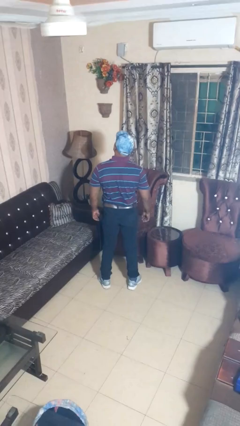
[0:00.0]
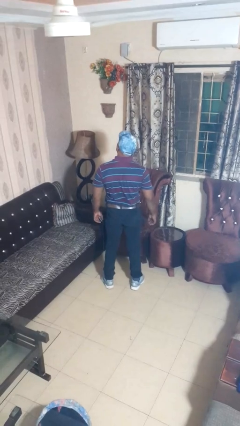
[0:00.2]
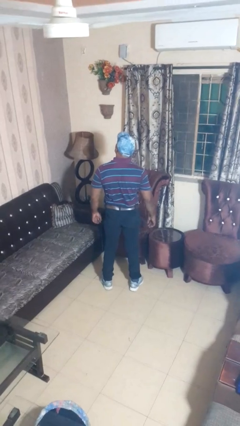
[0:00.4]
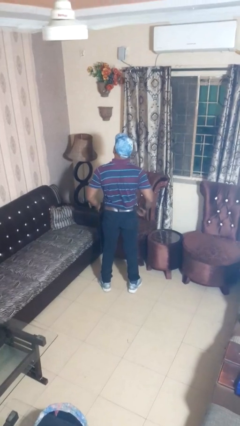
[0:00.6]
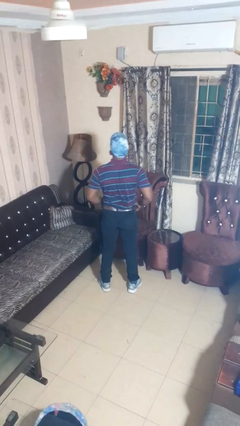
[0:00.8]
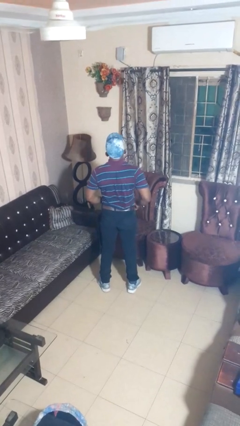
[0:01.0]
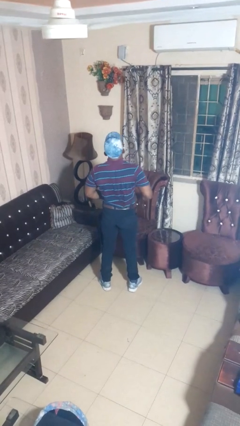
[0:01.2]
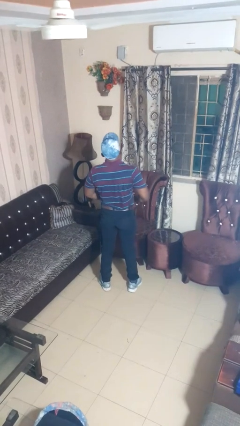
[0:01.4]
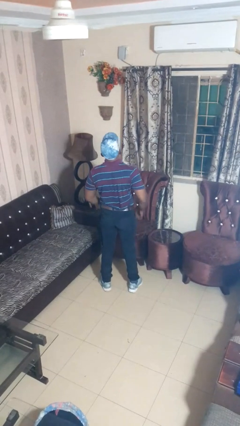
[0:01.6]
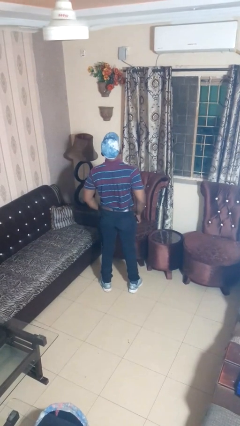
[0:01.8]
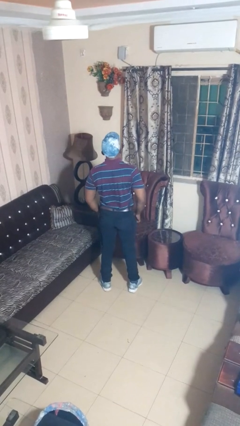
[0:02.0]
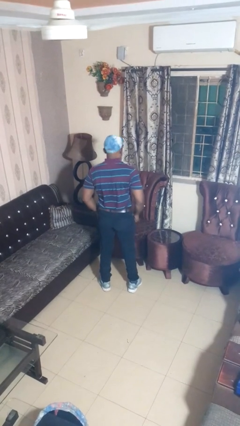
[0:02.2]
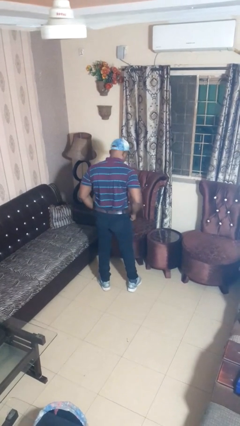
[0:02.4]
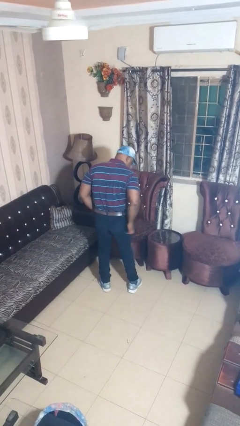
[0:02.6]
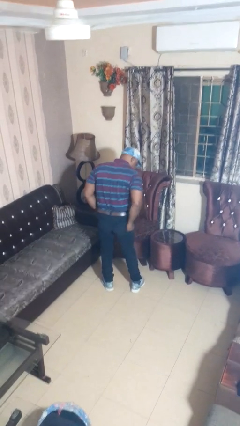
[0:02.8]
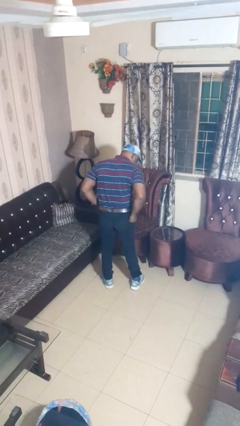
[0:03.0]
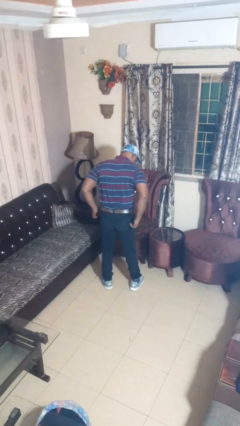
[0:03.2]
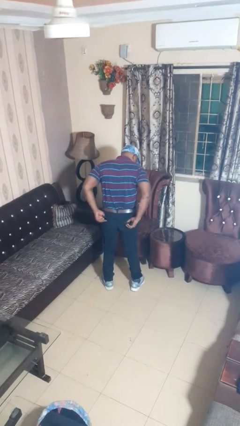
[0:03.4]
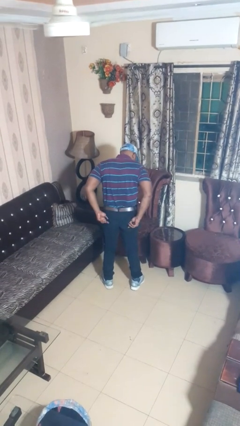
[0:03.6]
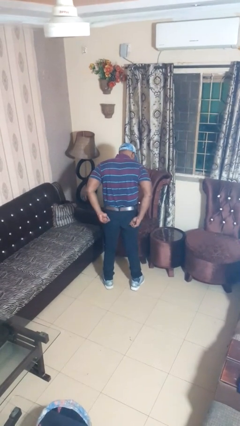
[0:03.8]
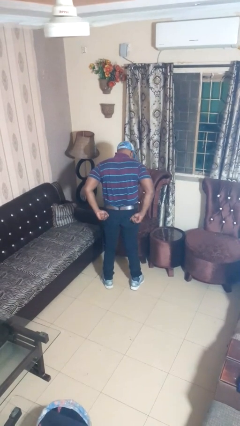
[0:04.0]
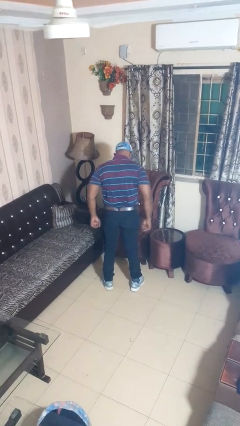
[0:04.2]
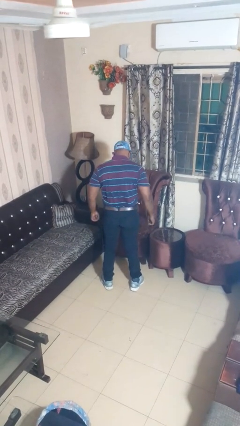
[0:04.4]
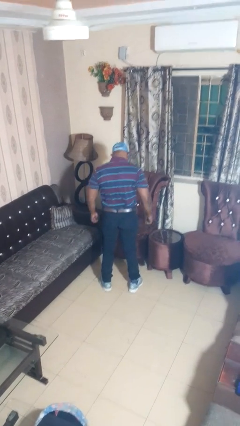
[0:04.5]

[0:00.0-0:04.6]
person hikes up pants

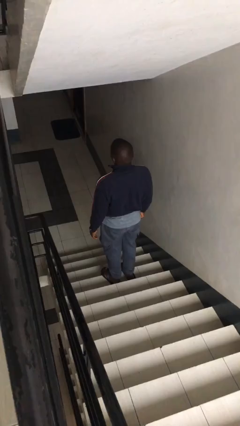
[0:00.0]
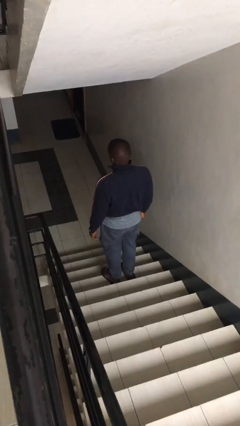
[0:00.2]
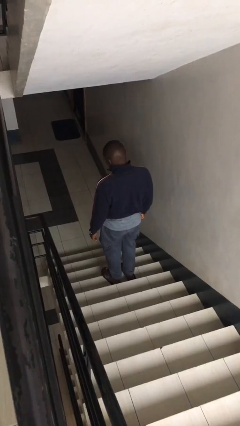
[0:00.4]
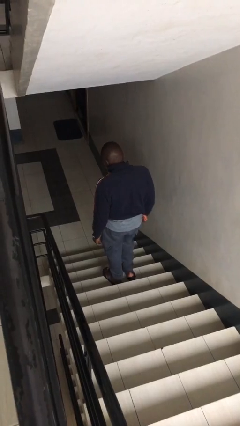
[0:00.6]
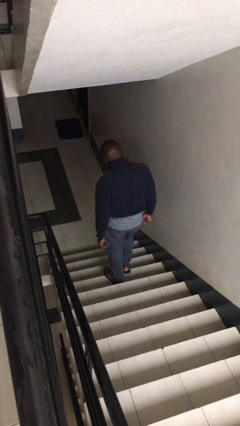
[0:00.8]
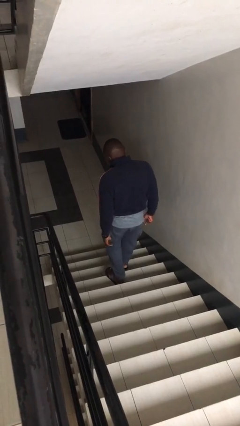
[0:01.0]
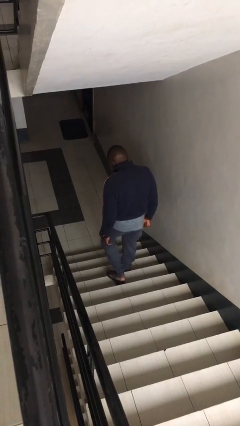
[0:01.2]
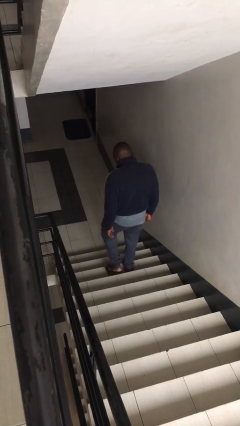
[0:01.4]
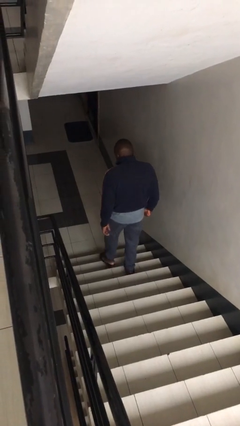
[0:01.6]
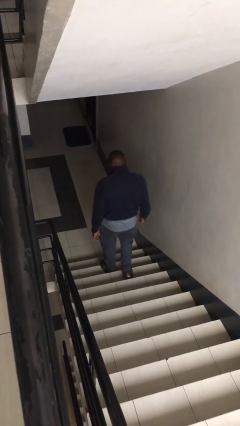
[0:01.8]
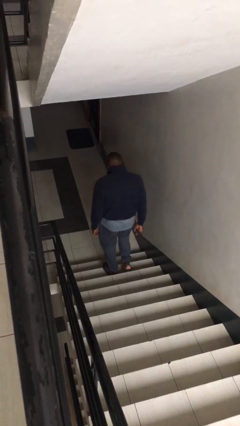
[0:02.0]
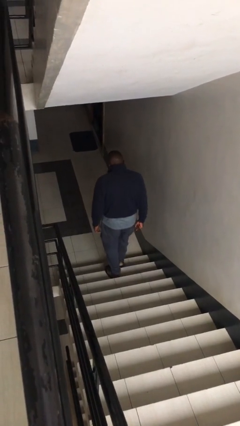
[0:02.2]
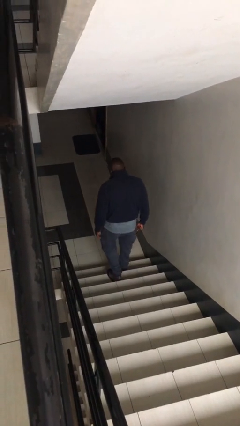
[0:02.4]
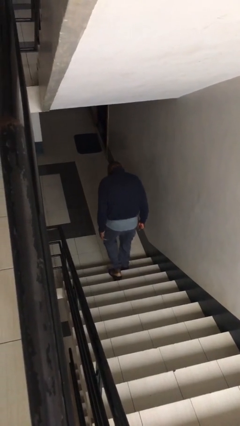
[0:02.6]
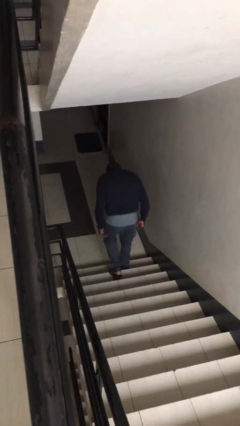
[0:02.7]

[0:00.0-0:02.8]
person climbs down stairs

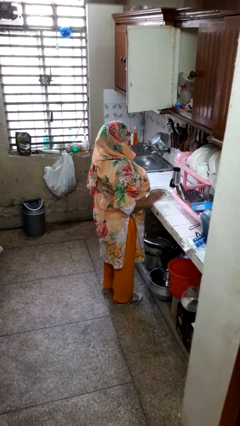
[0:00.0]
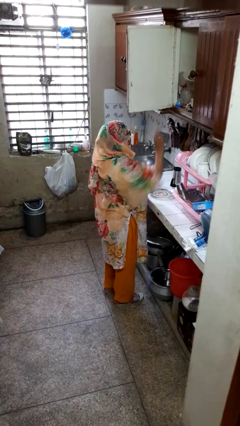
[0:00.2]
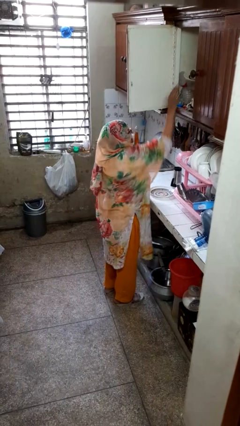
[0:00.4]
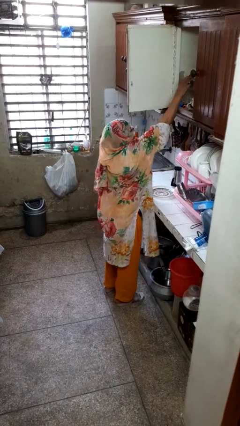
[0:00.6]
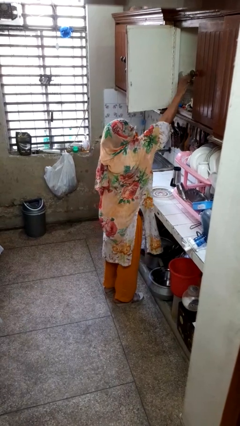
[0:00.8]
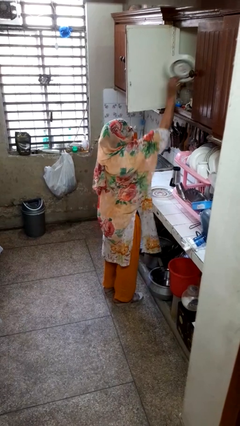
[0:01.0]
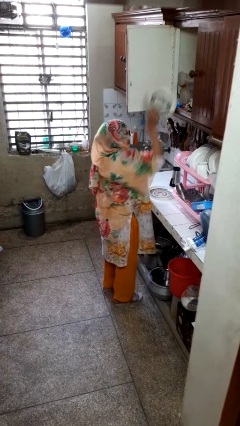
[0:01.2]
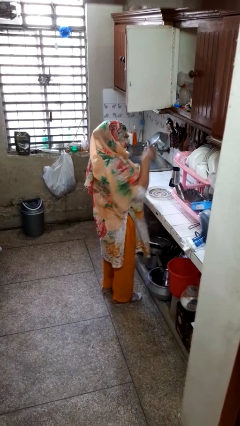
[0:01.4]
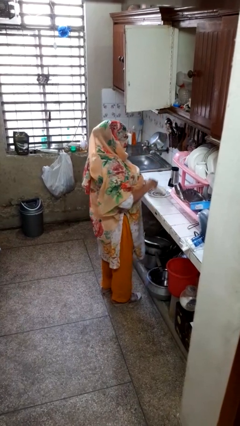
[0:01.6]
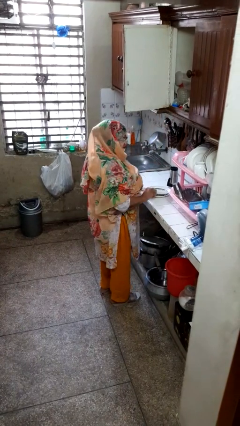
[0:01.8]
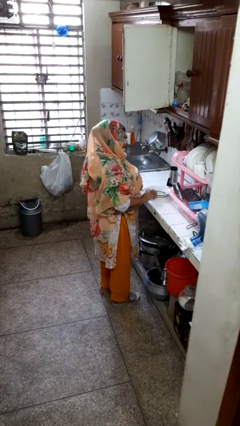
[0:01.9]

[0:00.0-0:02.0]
person takes object from cabinet

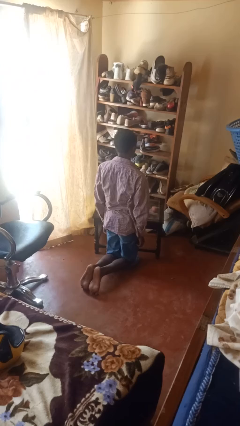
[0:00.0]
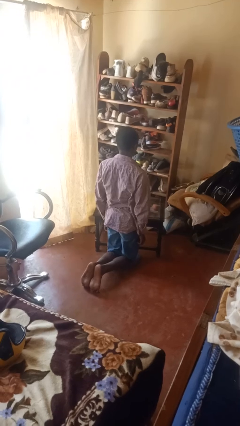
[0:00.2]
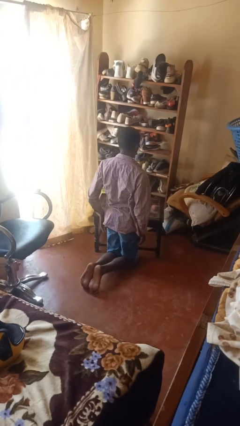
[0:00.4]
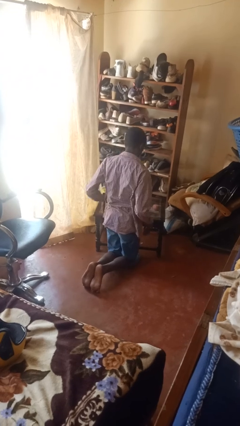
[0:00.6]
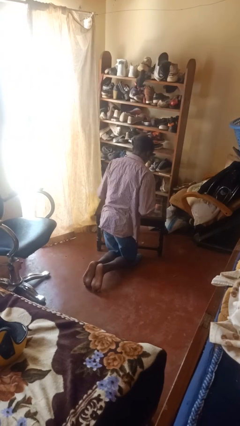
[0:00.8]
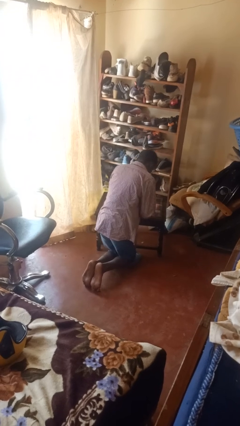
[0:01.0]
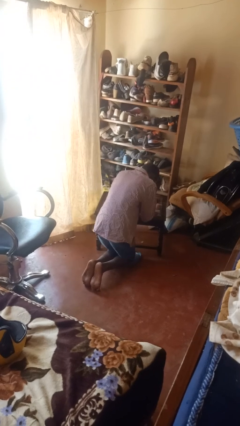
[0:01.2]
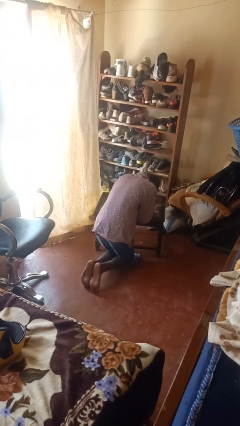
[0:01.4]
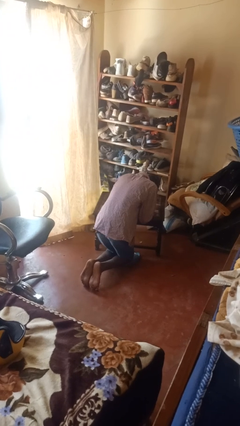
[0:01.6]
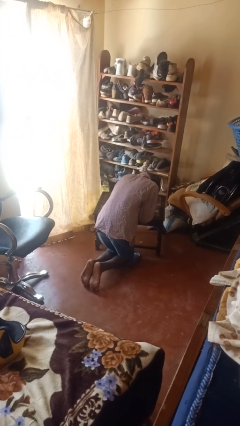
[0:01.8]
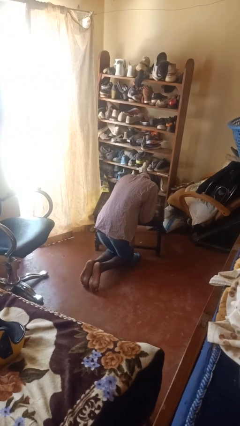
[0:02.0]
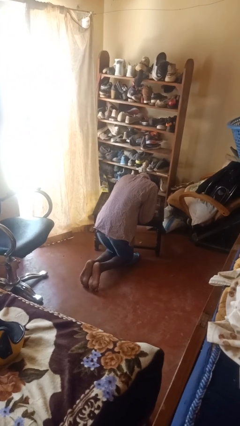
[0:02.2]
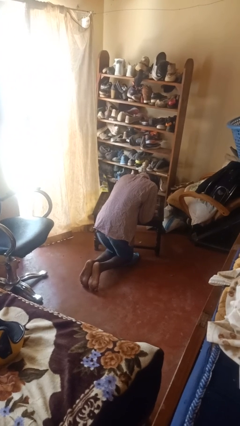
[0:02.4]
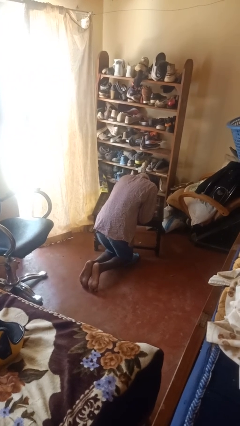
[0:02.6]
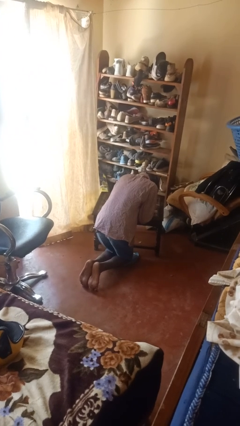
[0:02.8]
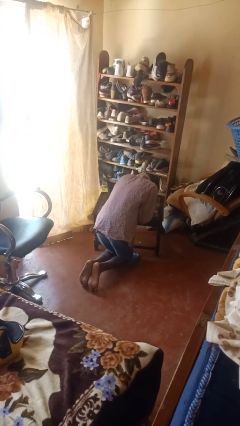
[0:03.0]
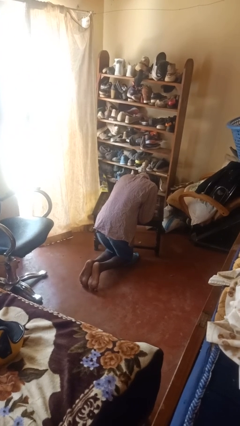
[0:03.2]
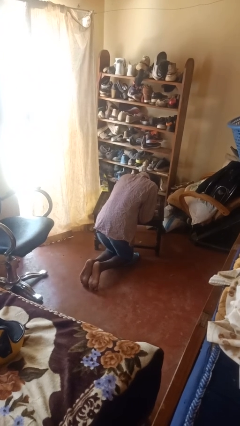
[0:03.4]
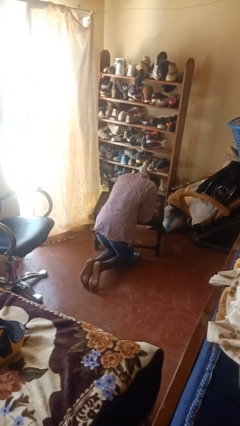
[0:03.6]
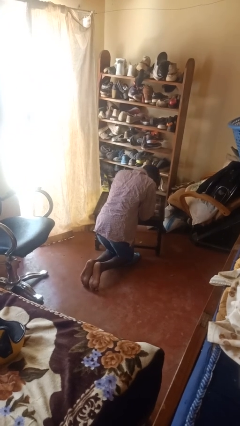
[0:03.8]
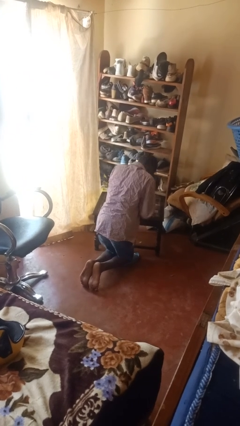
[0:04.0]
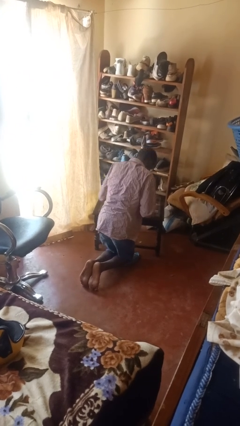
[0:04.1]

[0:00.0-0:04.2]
person prays

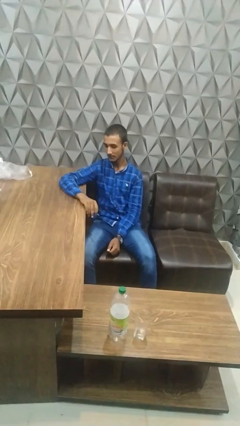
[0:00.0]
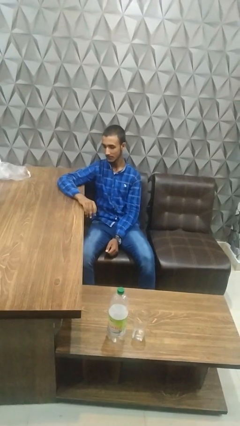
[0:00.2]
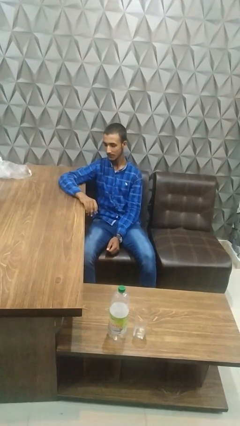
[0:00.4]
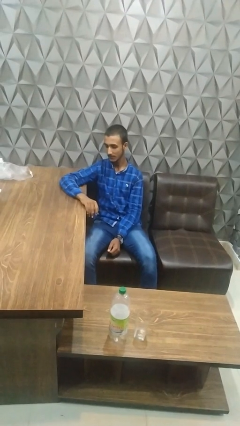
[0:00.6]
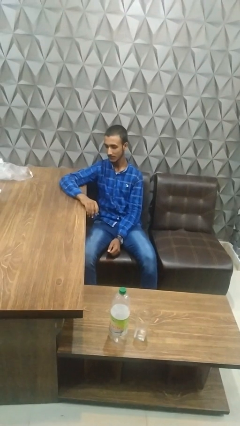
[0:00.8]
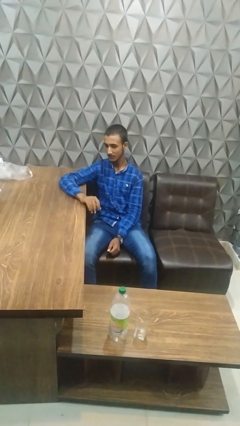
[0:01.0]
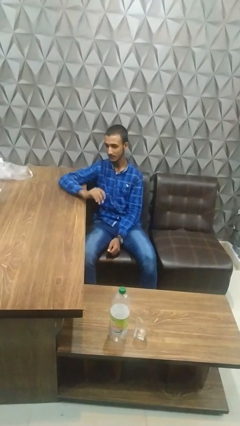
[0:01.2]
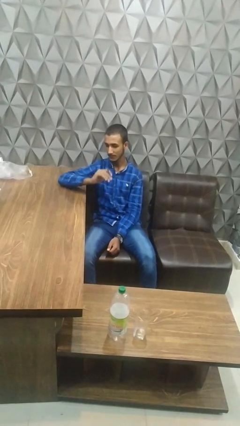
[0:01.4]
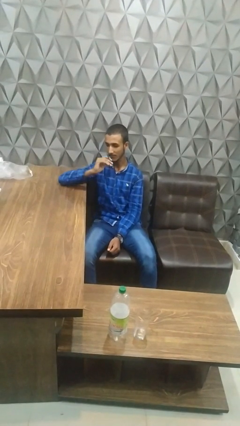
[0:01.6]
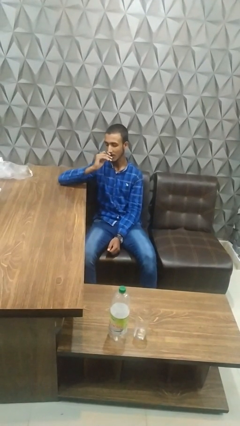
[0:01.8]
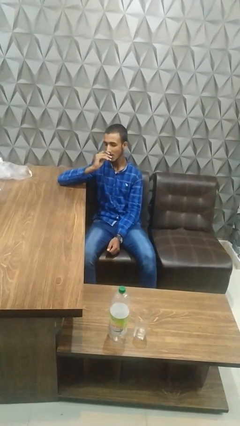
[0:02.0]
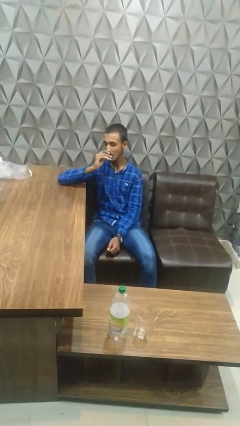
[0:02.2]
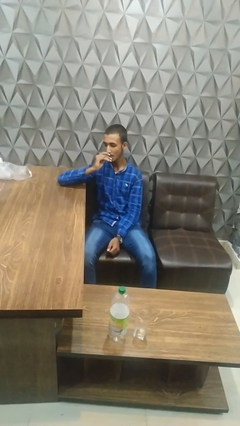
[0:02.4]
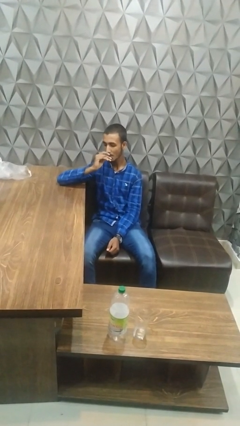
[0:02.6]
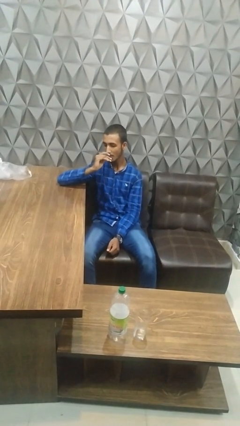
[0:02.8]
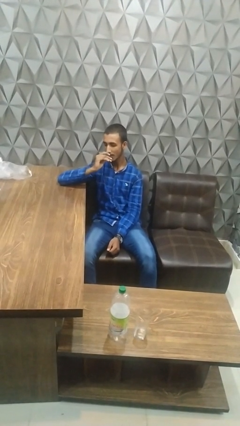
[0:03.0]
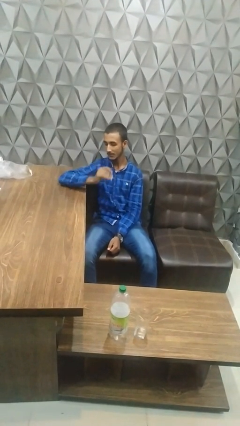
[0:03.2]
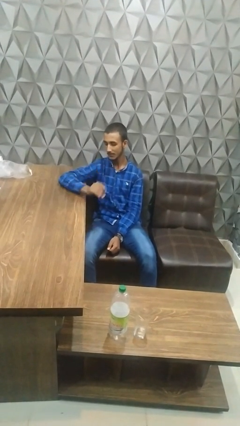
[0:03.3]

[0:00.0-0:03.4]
person vapes

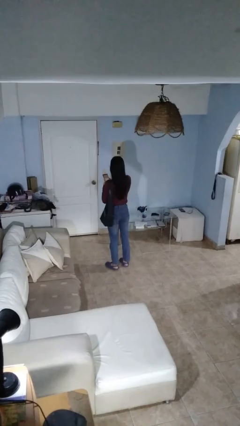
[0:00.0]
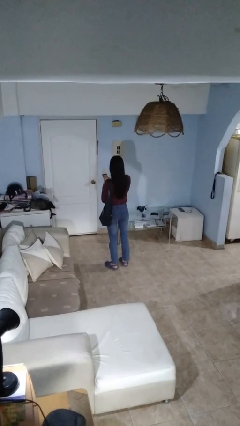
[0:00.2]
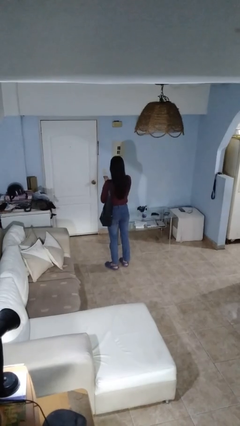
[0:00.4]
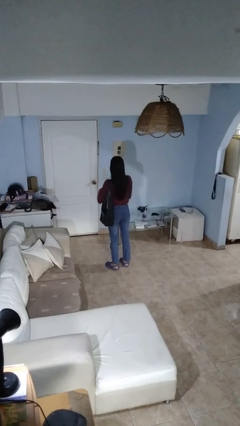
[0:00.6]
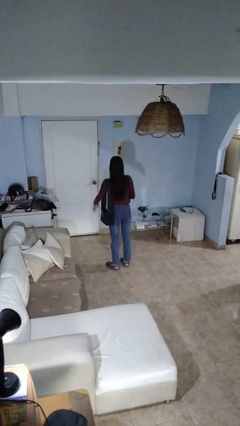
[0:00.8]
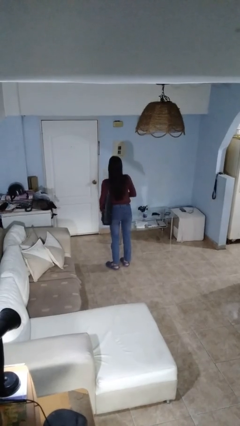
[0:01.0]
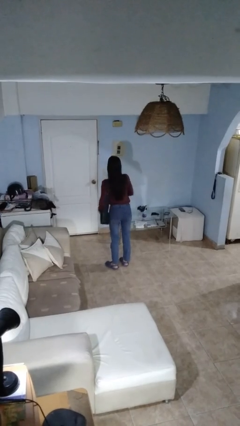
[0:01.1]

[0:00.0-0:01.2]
person puts object into purse
